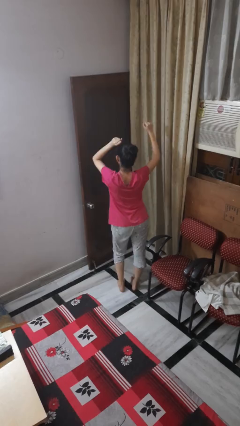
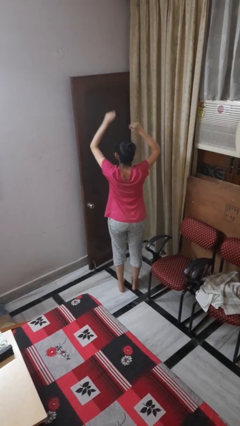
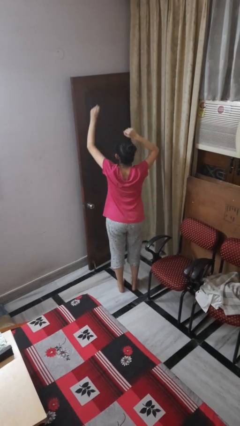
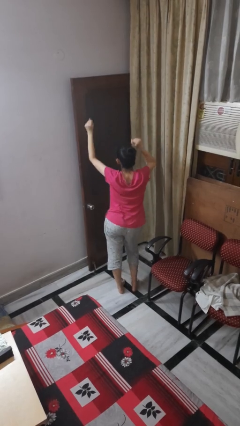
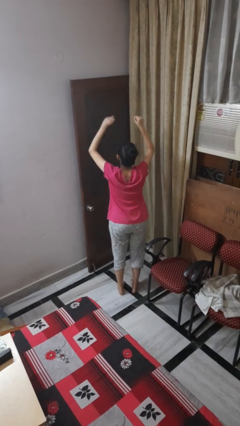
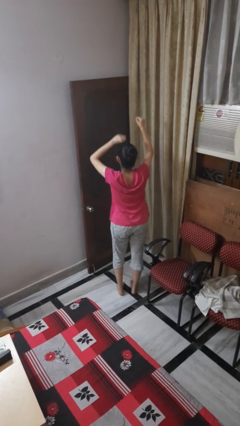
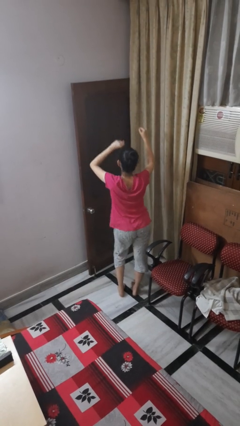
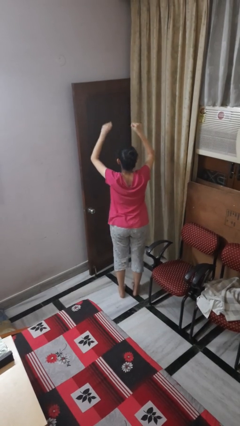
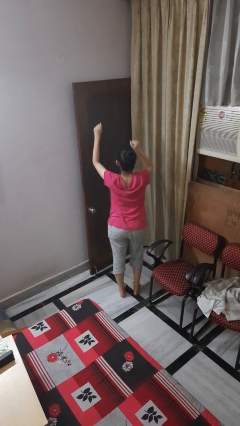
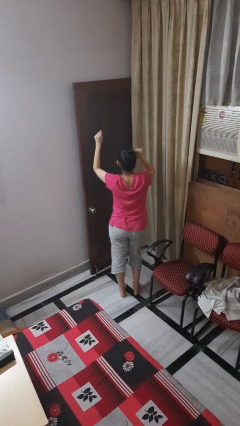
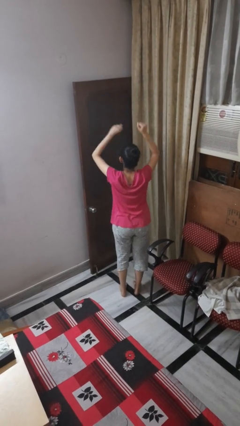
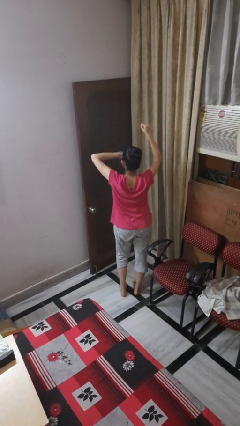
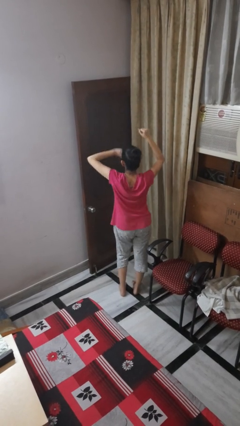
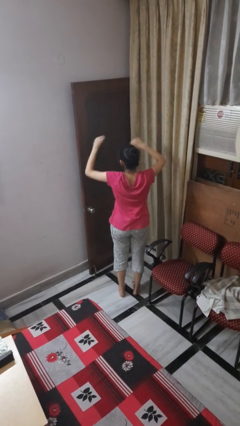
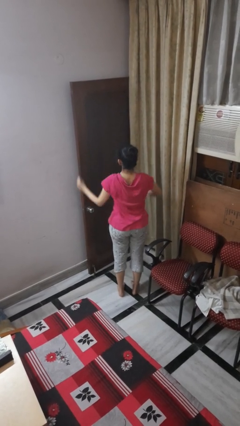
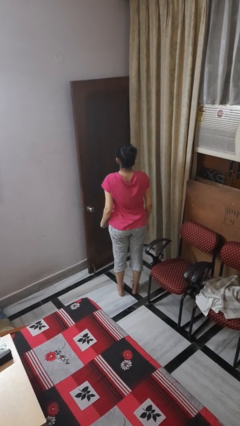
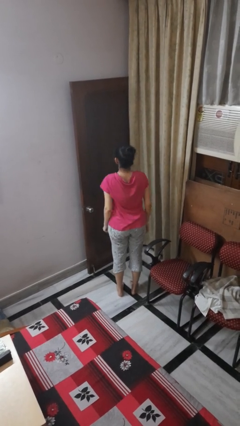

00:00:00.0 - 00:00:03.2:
person dances in place

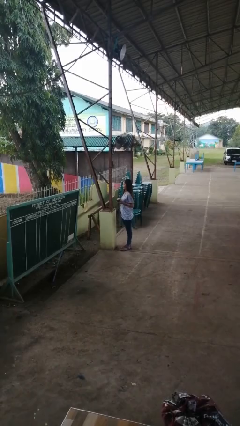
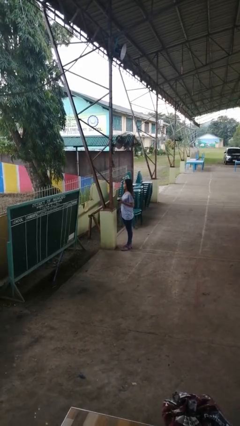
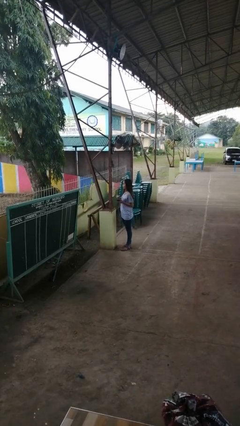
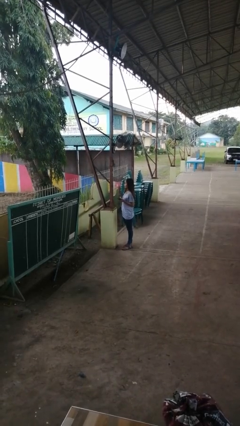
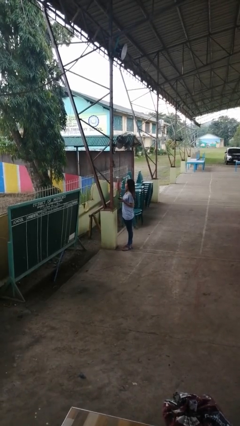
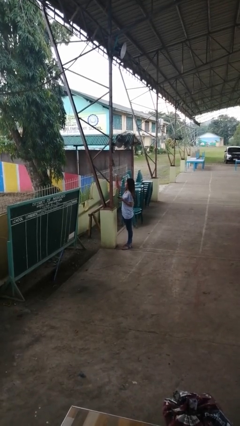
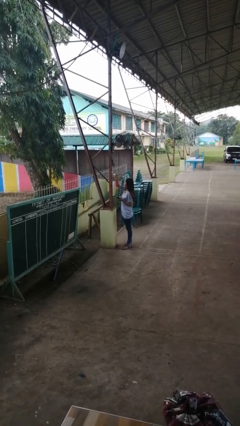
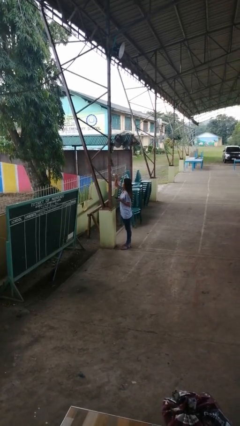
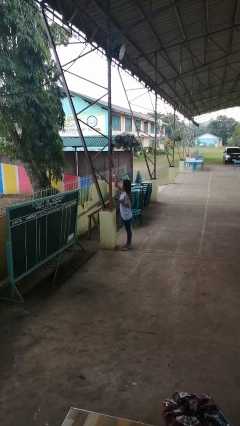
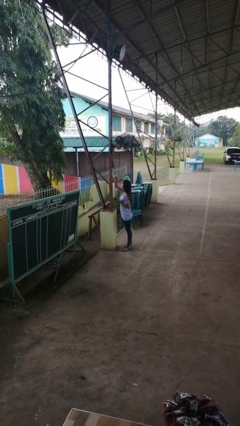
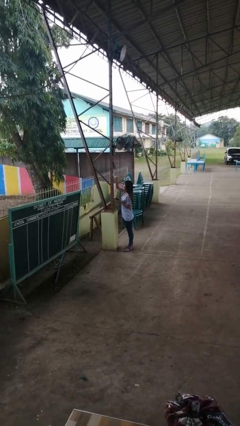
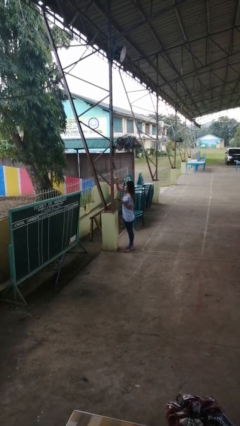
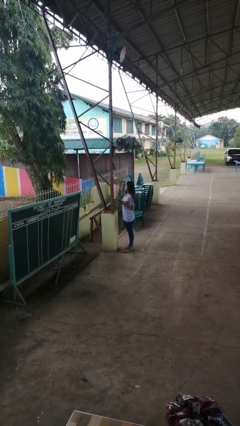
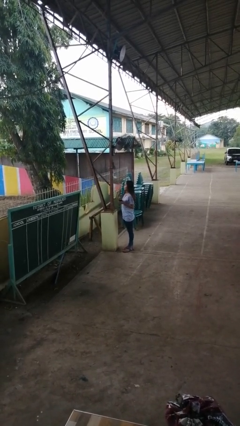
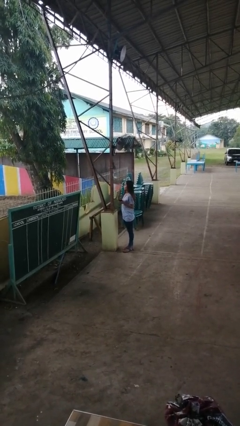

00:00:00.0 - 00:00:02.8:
person plugs into electrical socket

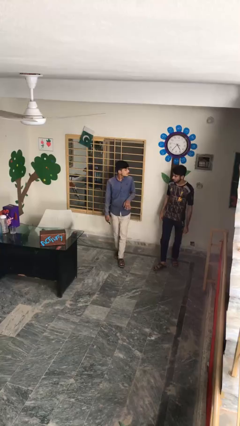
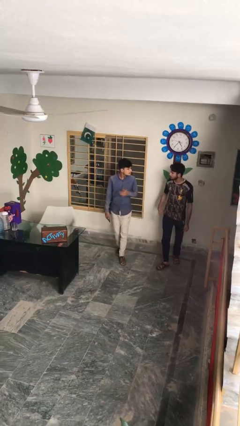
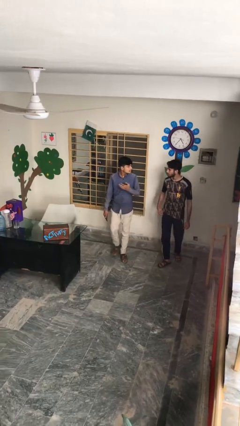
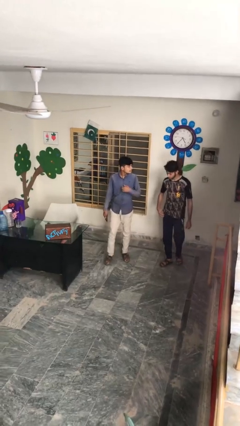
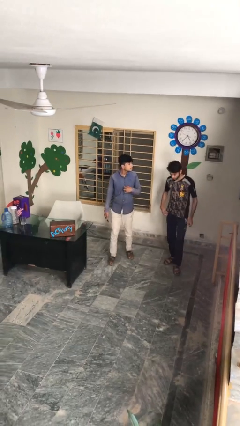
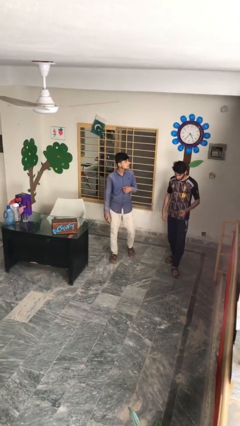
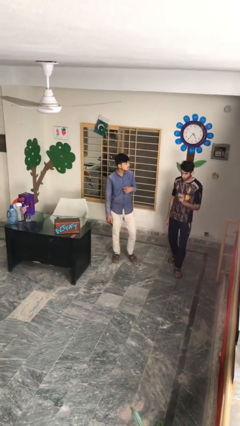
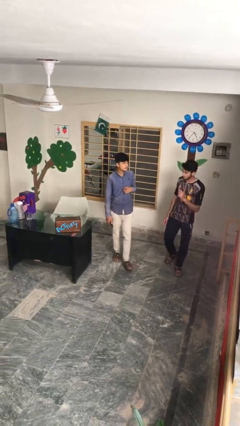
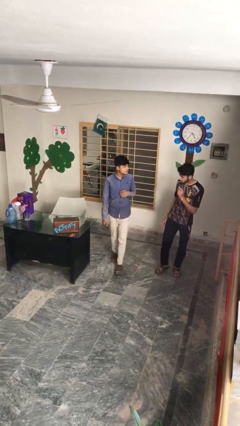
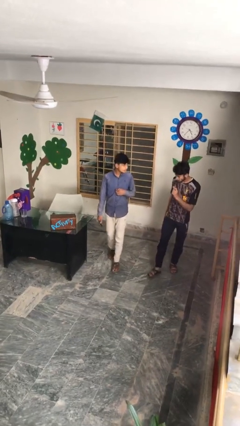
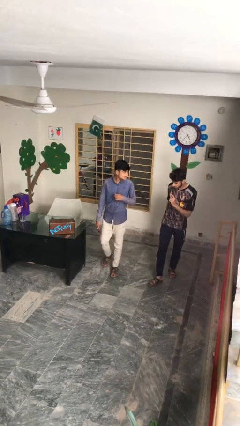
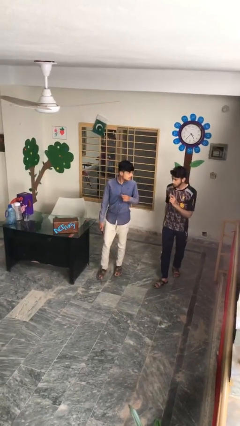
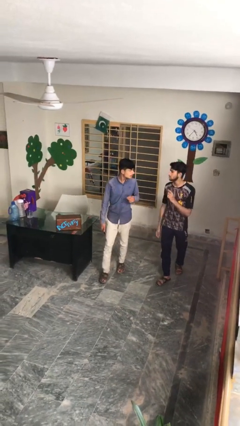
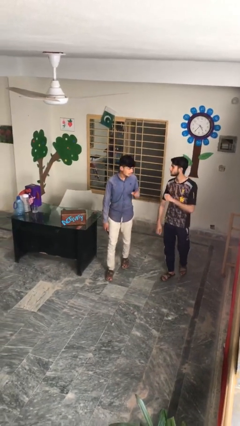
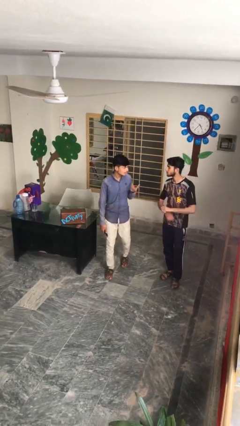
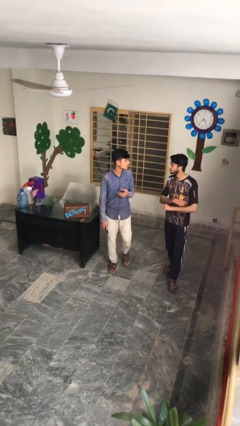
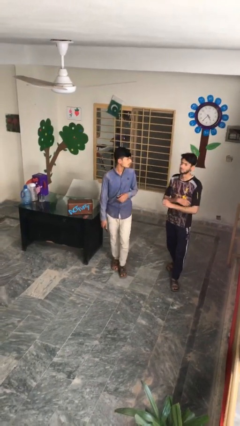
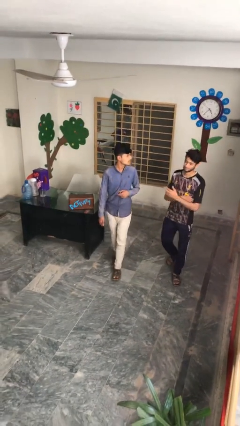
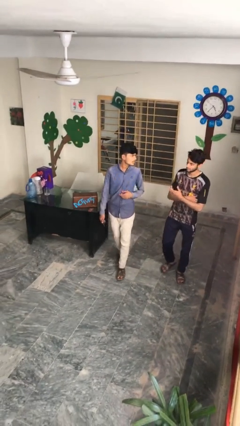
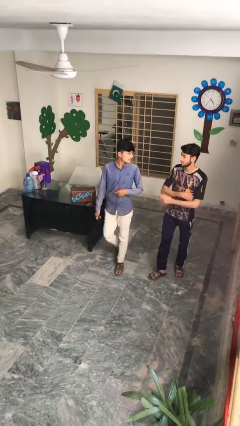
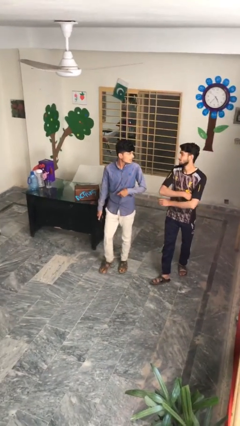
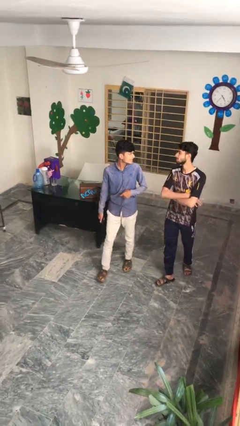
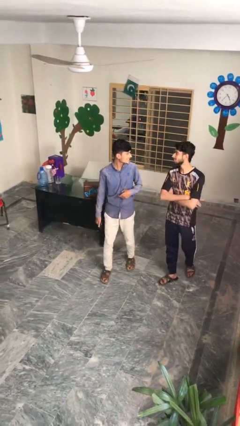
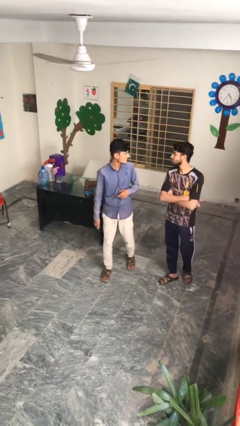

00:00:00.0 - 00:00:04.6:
person talks to person

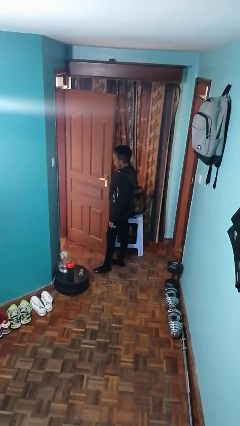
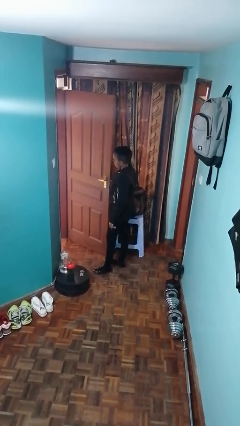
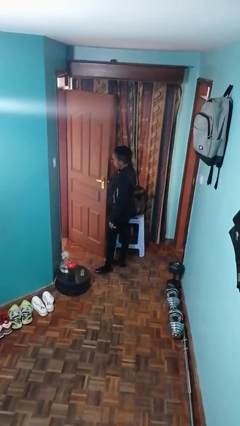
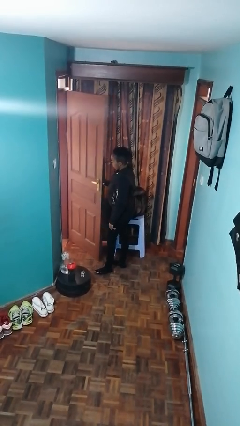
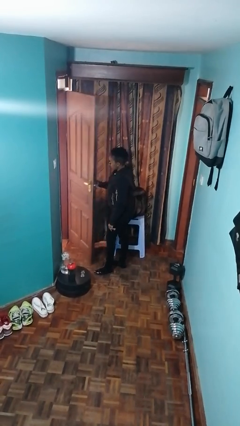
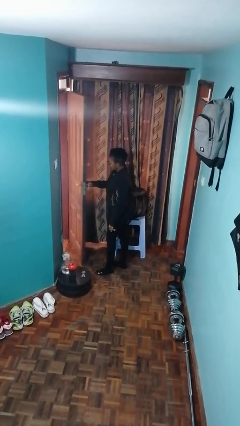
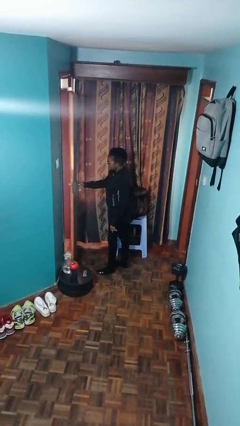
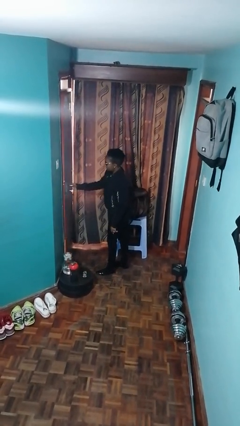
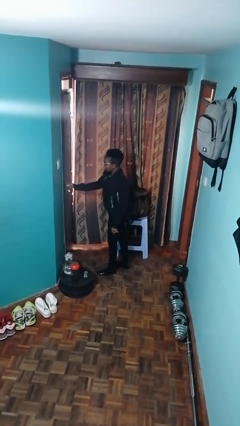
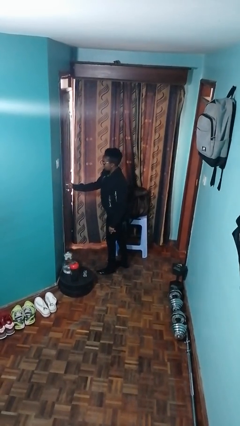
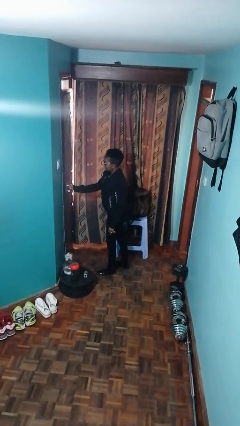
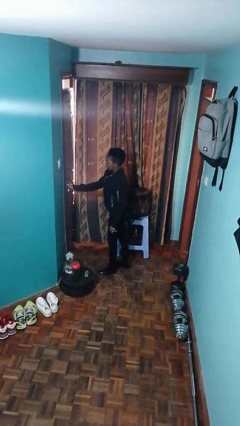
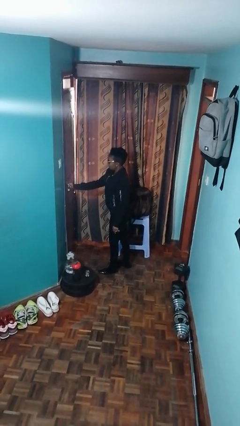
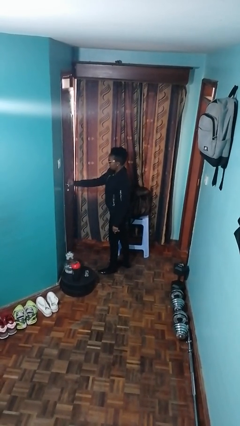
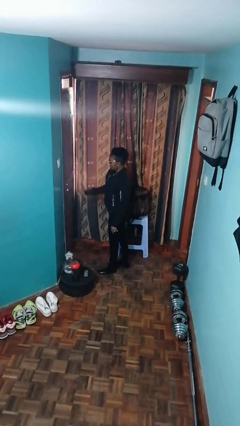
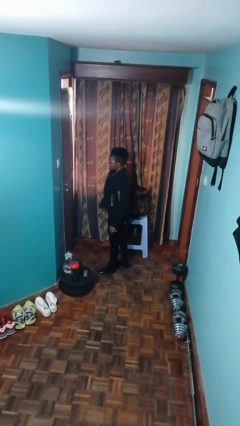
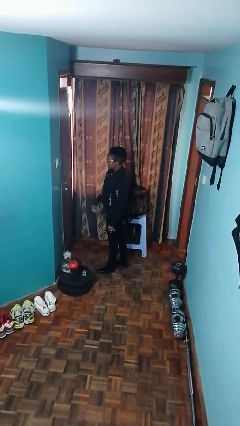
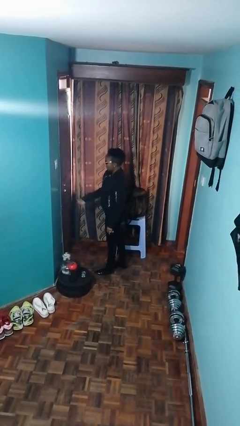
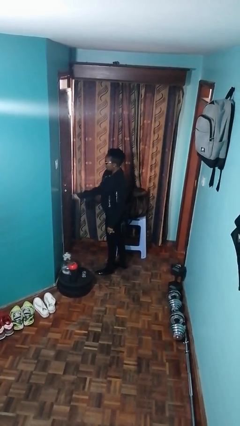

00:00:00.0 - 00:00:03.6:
person closes facility door

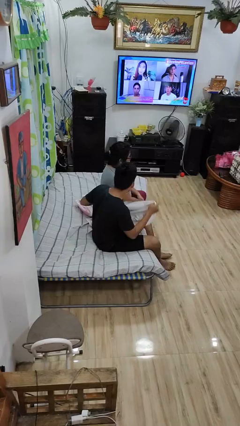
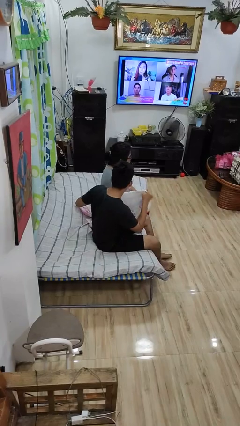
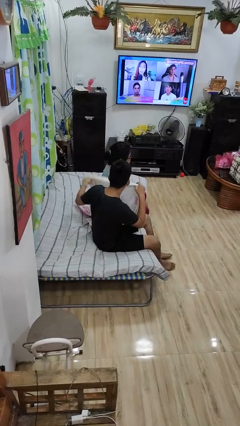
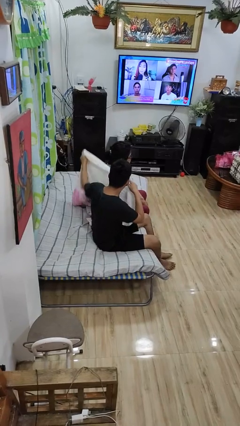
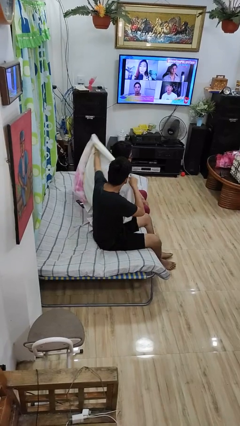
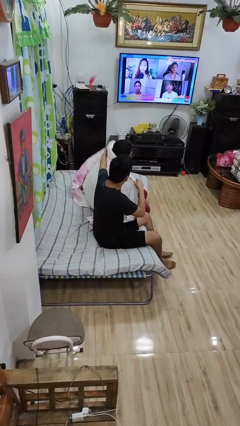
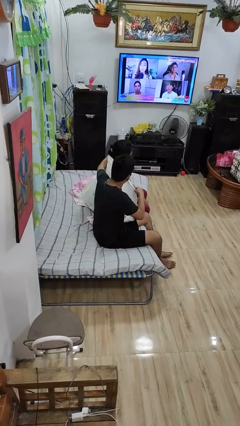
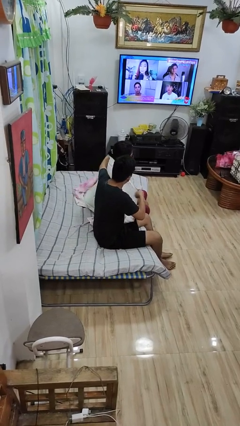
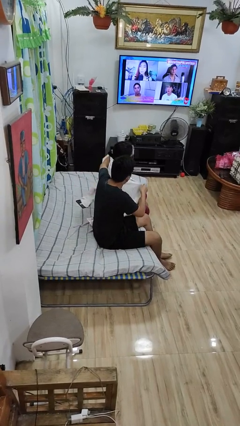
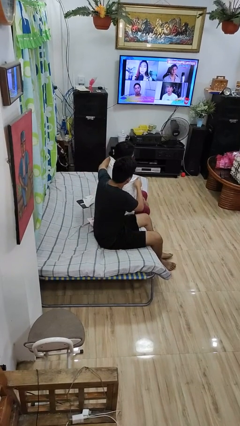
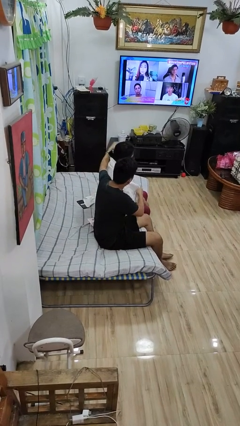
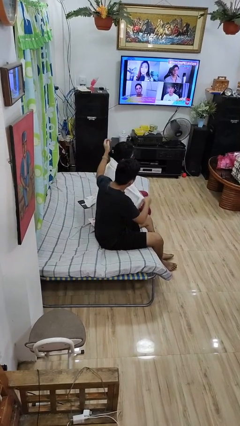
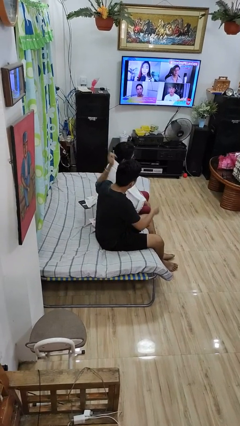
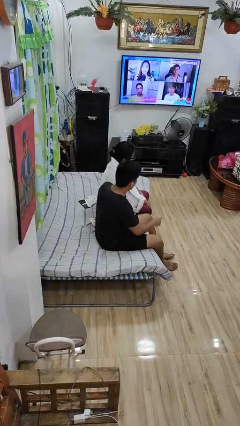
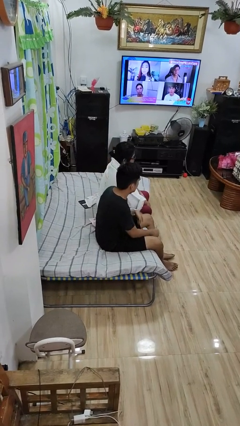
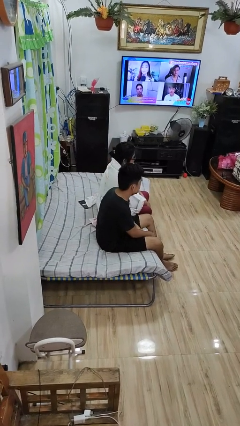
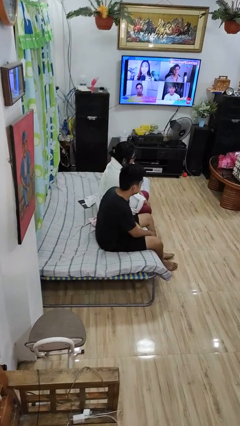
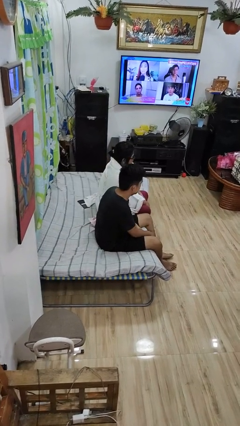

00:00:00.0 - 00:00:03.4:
person covers friend with blanket

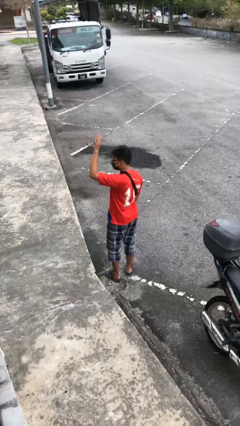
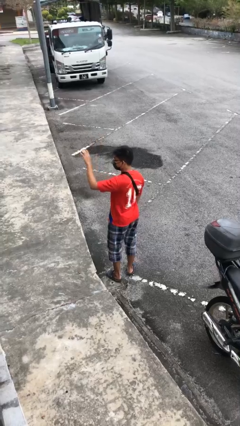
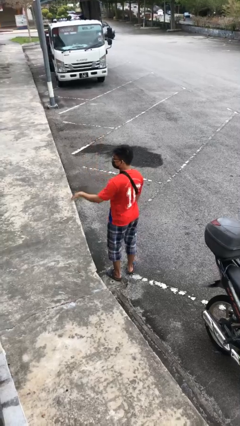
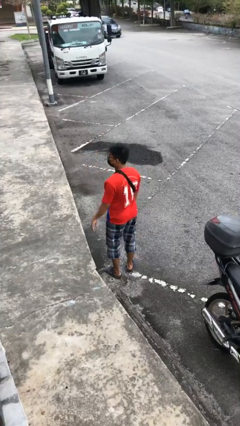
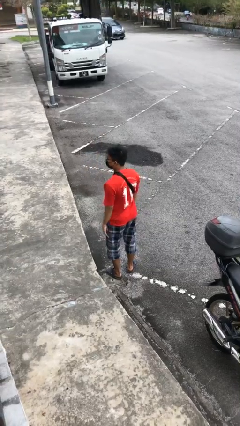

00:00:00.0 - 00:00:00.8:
person gestures lower hand
